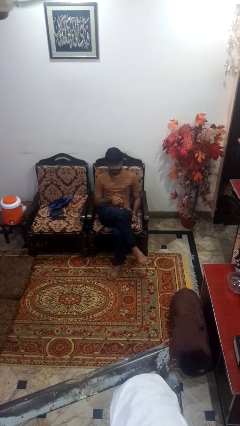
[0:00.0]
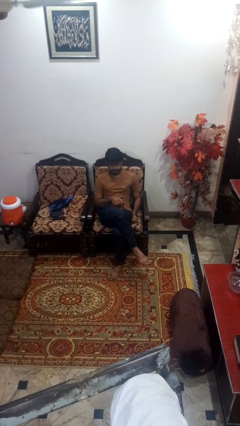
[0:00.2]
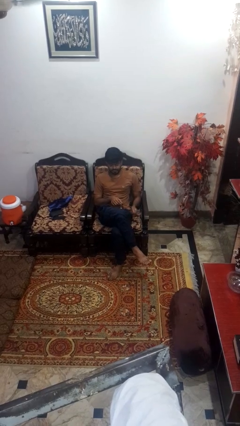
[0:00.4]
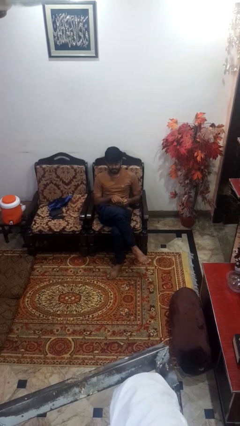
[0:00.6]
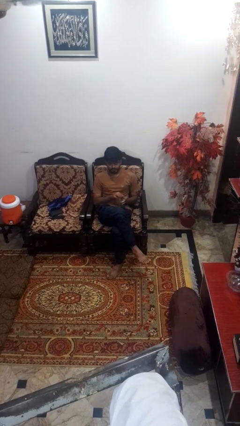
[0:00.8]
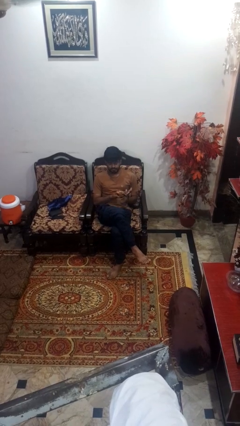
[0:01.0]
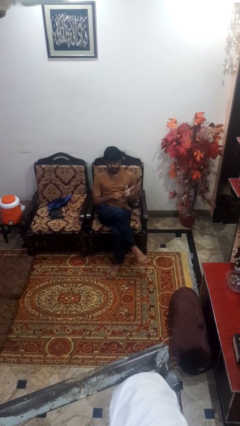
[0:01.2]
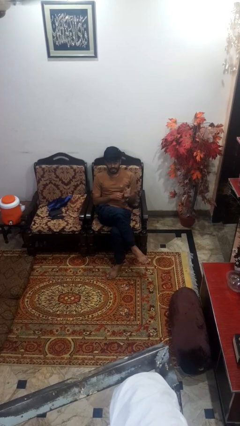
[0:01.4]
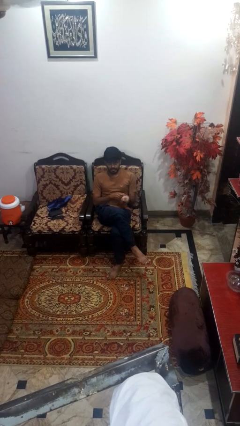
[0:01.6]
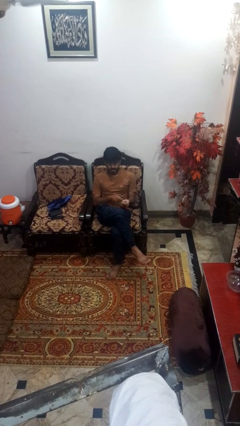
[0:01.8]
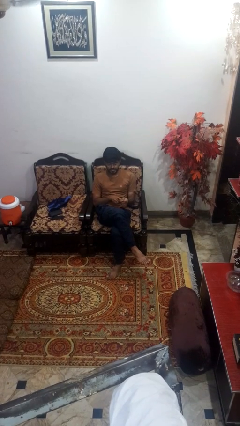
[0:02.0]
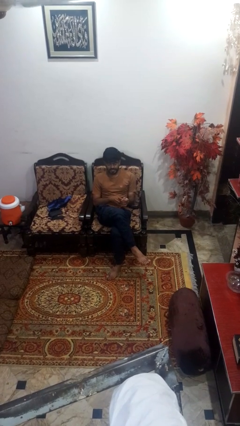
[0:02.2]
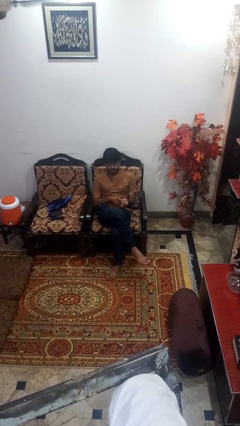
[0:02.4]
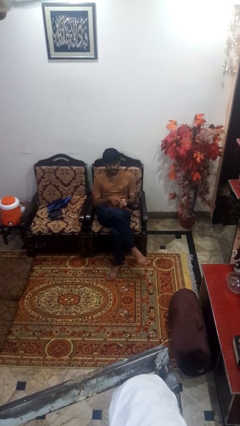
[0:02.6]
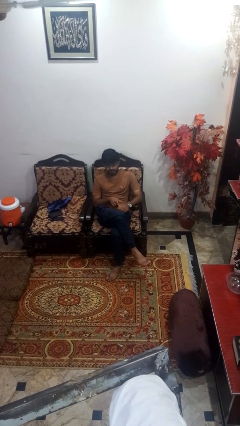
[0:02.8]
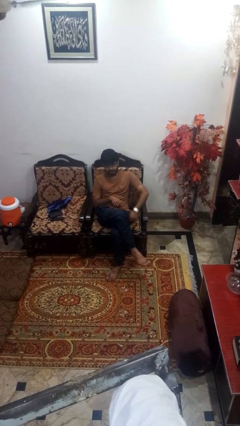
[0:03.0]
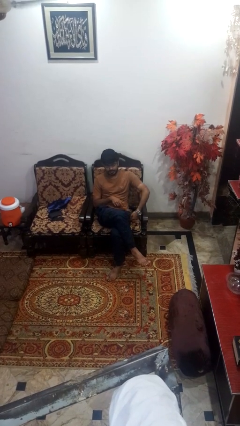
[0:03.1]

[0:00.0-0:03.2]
person puts on wristwatch

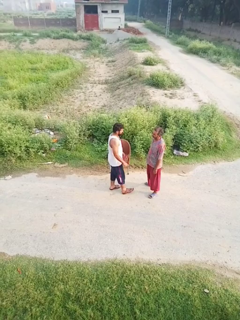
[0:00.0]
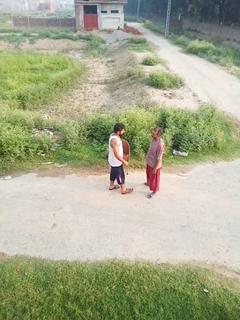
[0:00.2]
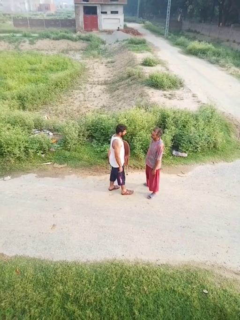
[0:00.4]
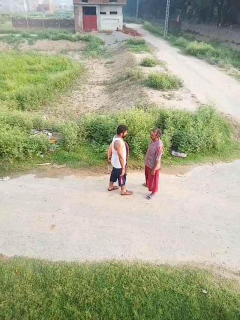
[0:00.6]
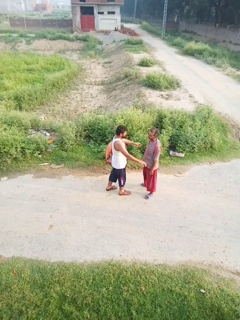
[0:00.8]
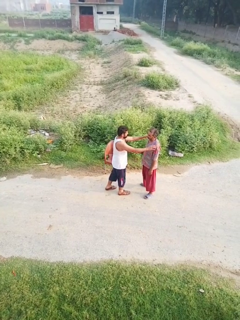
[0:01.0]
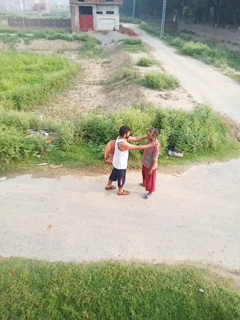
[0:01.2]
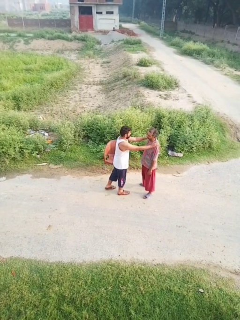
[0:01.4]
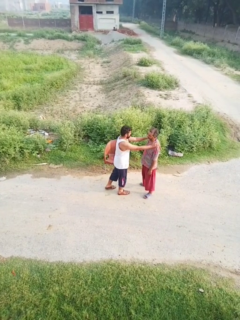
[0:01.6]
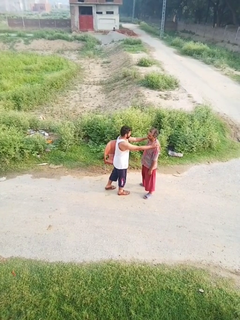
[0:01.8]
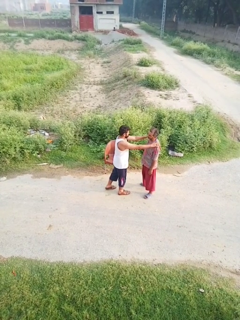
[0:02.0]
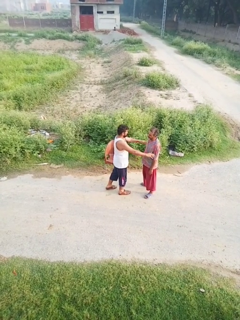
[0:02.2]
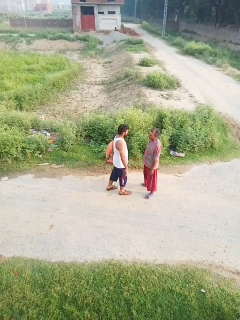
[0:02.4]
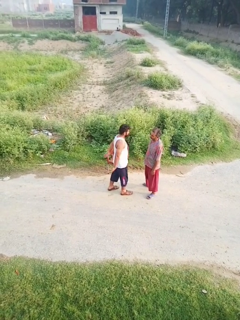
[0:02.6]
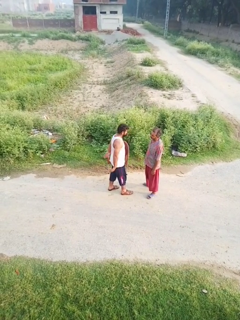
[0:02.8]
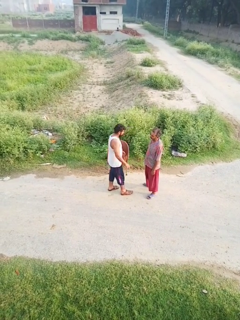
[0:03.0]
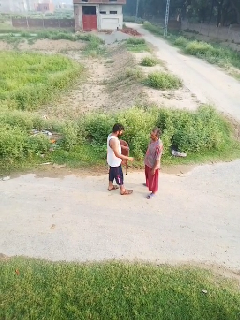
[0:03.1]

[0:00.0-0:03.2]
person pounds shoulders of person

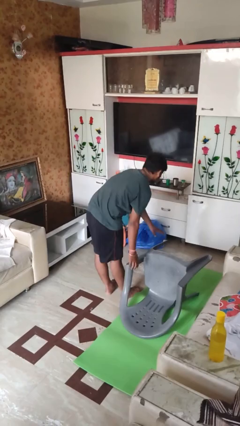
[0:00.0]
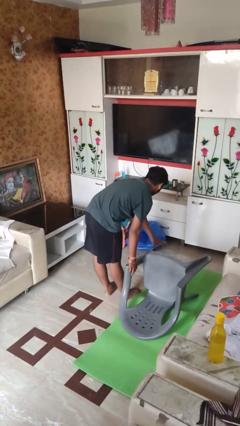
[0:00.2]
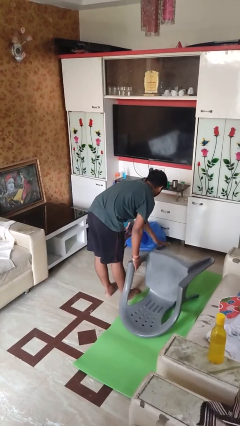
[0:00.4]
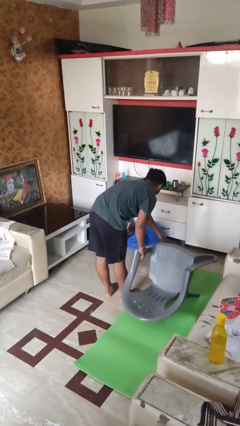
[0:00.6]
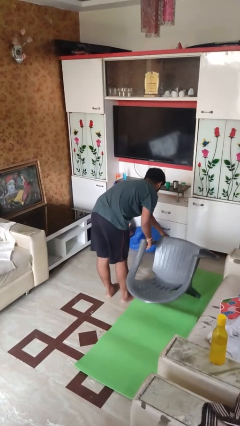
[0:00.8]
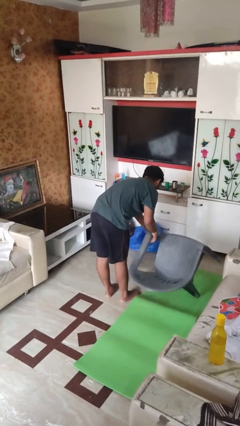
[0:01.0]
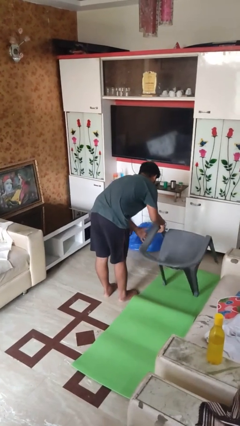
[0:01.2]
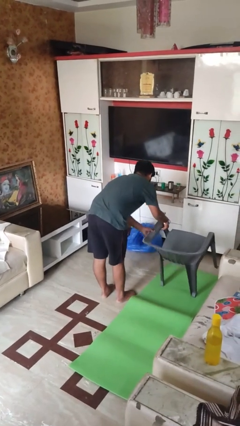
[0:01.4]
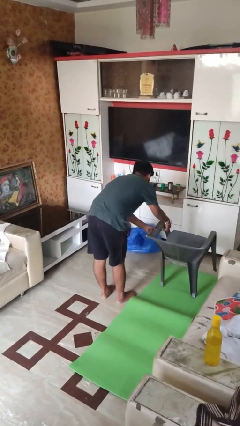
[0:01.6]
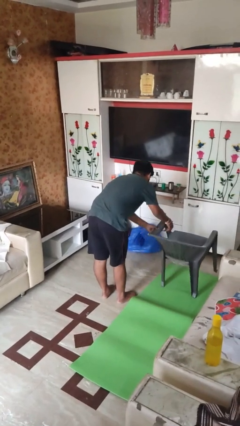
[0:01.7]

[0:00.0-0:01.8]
person sets upright furniture

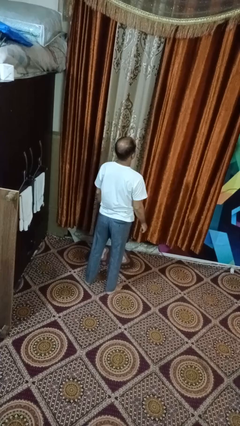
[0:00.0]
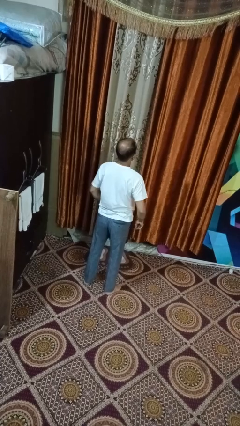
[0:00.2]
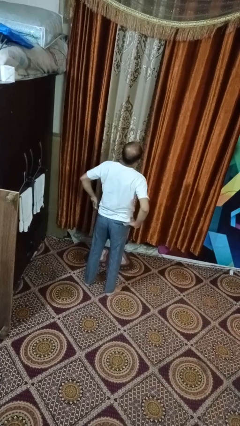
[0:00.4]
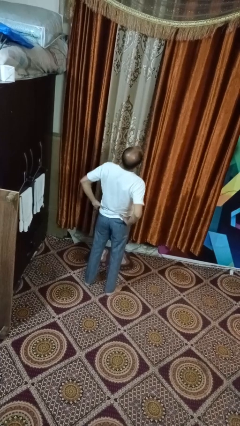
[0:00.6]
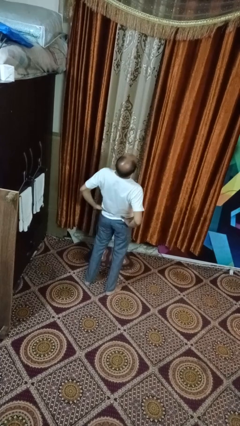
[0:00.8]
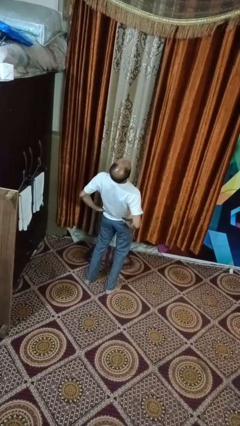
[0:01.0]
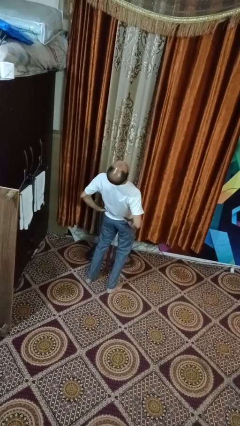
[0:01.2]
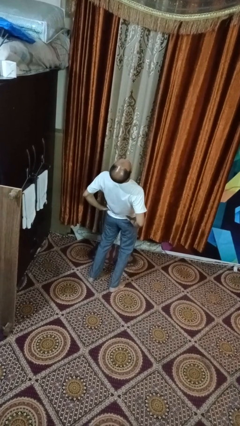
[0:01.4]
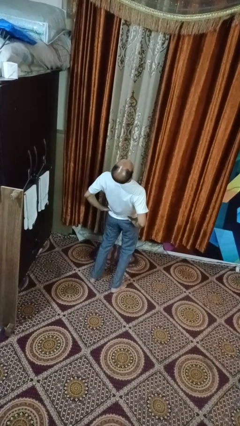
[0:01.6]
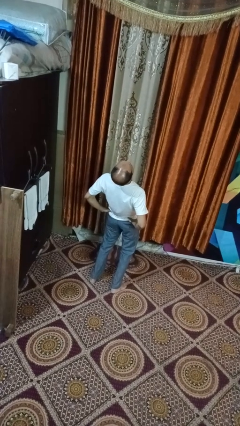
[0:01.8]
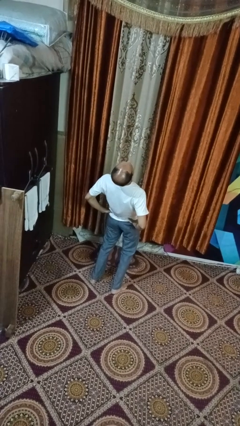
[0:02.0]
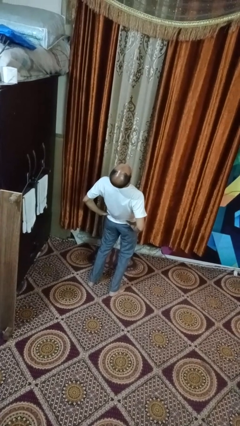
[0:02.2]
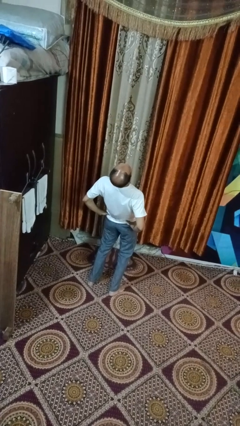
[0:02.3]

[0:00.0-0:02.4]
person stretches back

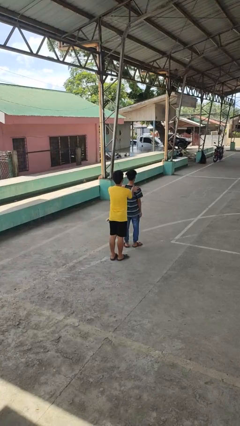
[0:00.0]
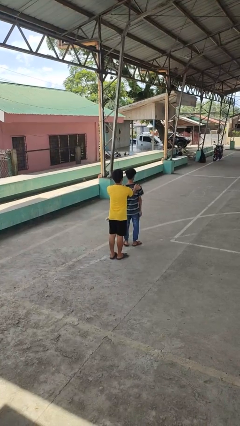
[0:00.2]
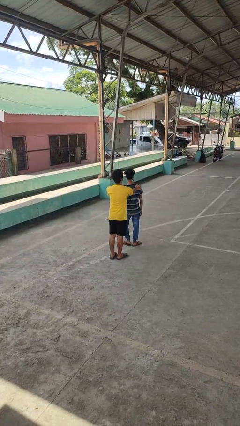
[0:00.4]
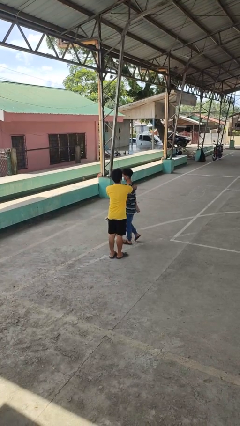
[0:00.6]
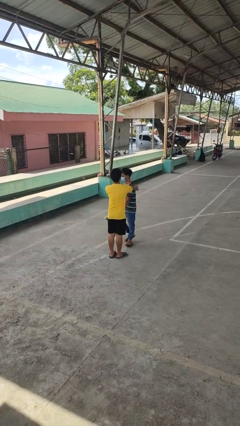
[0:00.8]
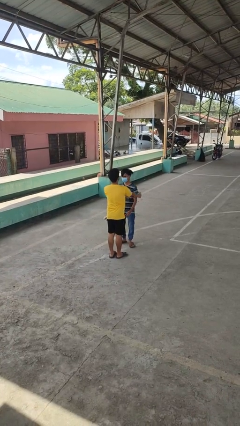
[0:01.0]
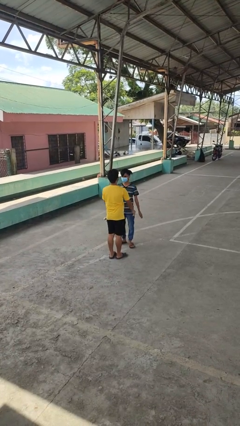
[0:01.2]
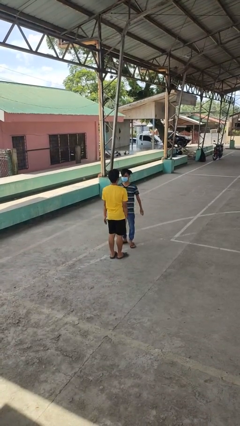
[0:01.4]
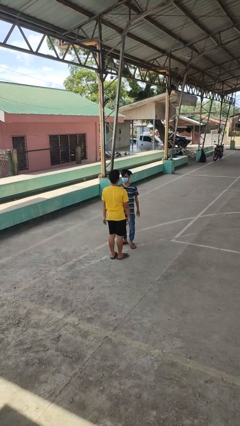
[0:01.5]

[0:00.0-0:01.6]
person spins person around

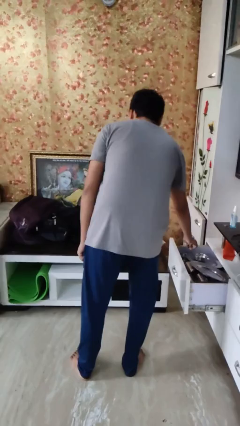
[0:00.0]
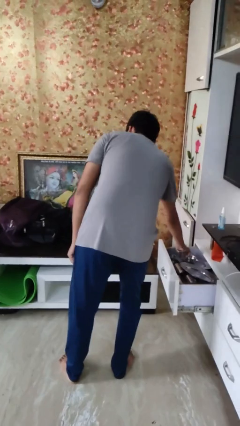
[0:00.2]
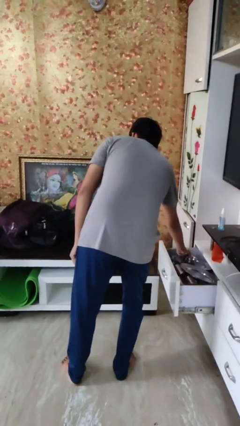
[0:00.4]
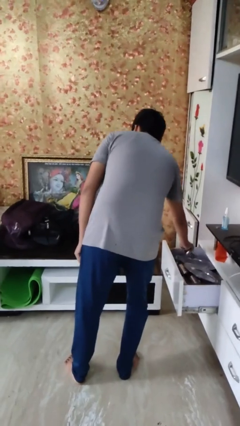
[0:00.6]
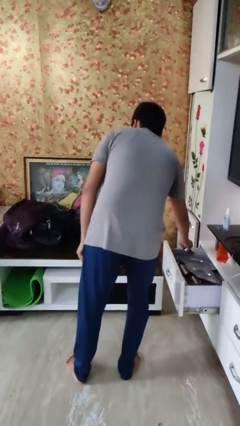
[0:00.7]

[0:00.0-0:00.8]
person takes object from kitchen drawer

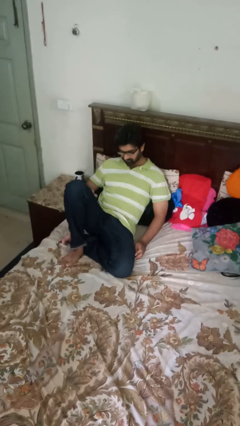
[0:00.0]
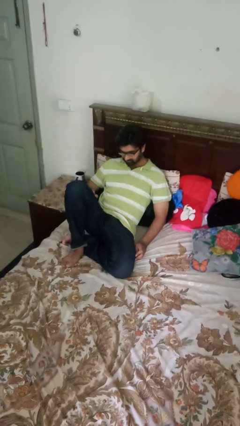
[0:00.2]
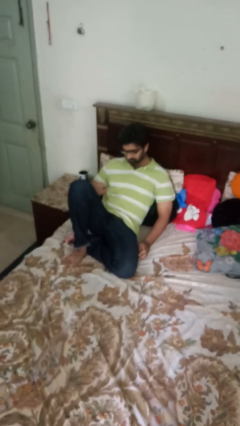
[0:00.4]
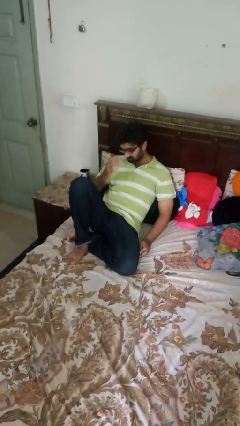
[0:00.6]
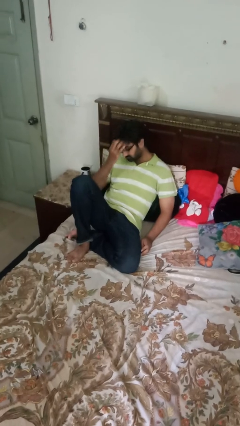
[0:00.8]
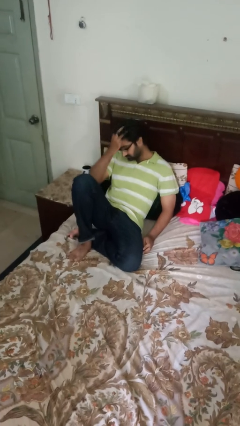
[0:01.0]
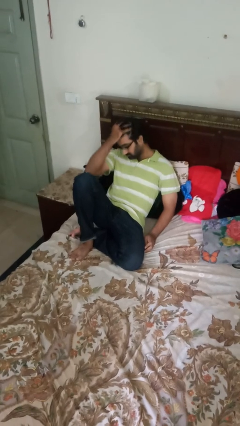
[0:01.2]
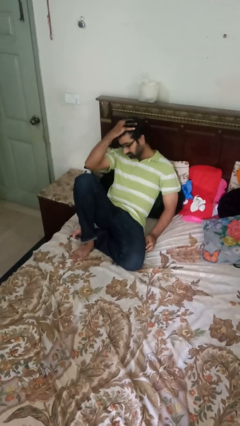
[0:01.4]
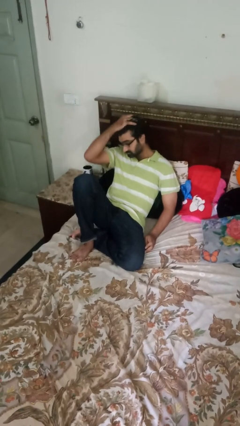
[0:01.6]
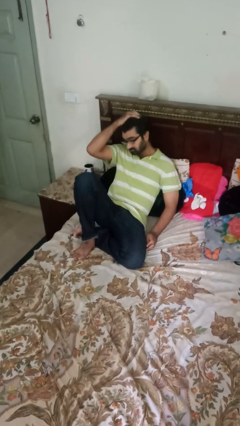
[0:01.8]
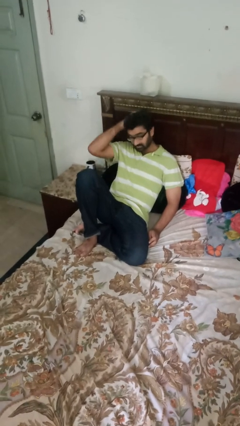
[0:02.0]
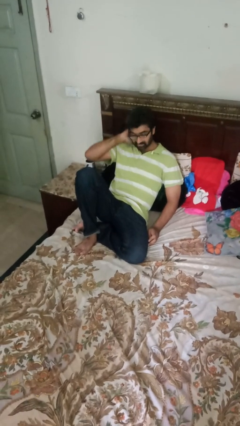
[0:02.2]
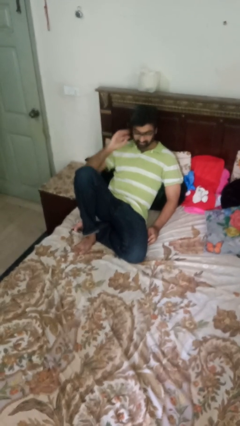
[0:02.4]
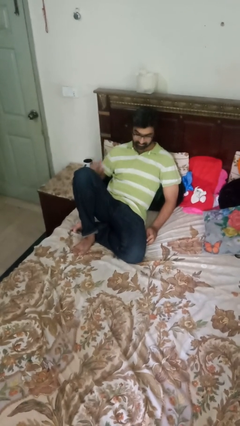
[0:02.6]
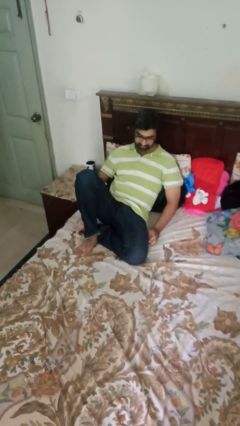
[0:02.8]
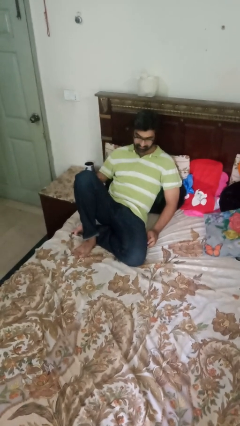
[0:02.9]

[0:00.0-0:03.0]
person strokes hair

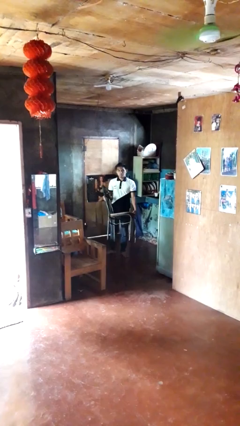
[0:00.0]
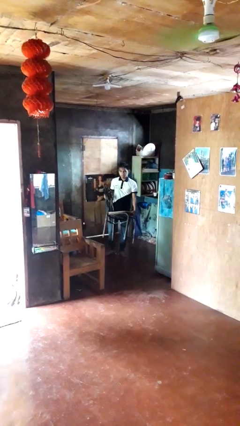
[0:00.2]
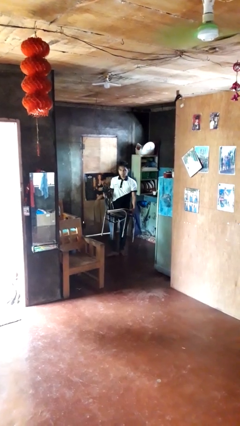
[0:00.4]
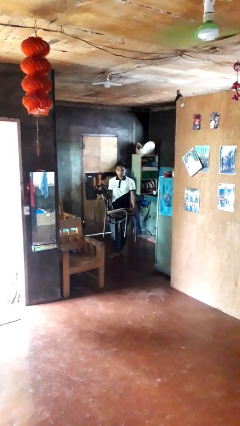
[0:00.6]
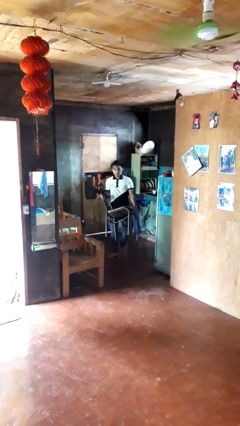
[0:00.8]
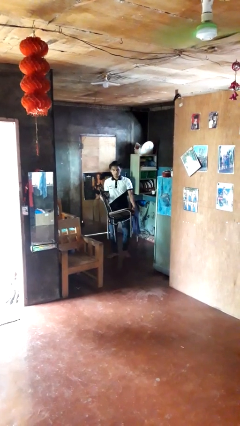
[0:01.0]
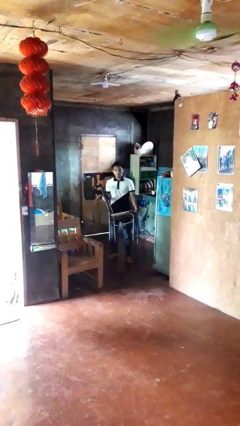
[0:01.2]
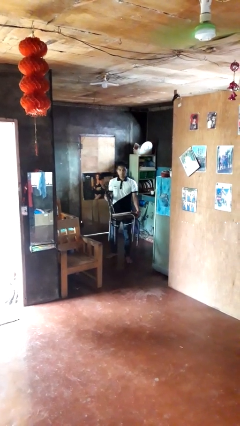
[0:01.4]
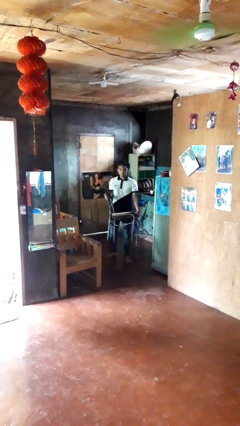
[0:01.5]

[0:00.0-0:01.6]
person carries furniture

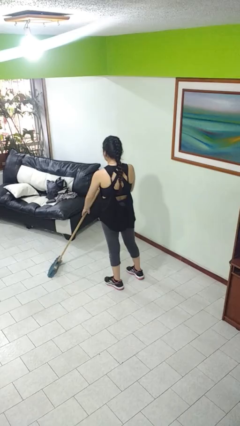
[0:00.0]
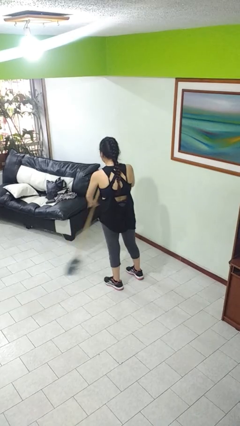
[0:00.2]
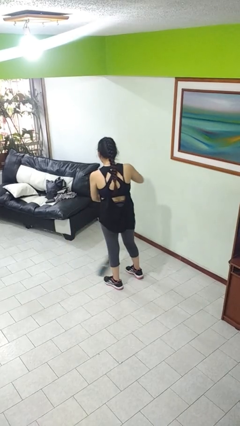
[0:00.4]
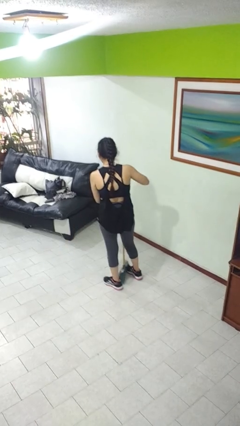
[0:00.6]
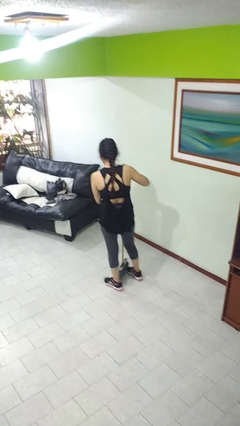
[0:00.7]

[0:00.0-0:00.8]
person sweeps floor
